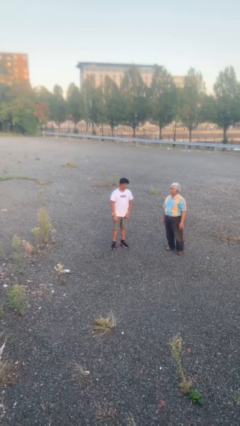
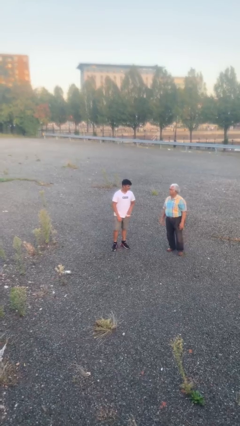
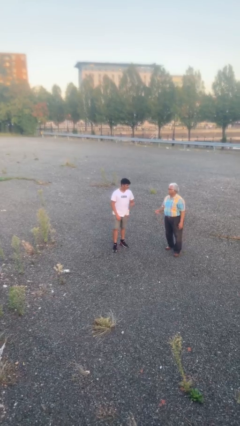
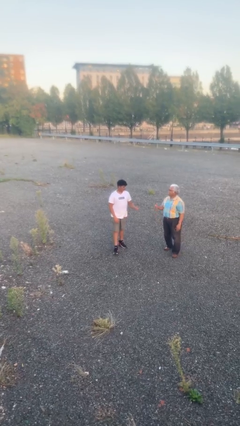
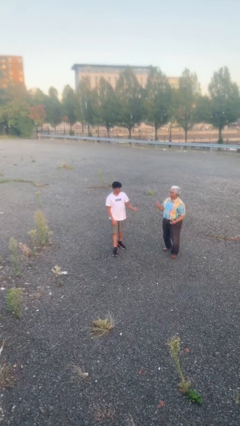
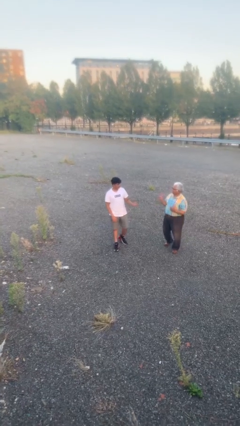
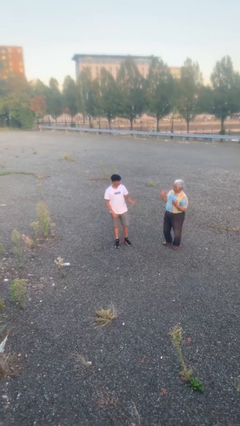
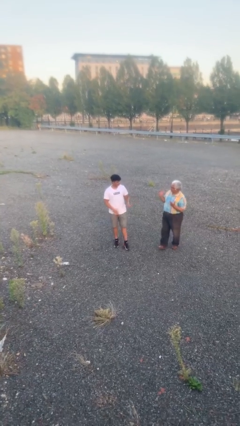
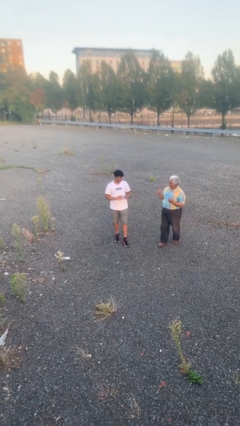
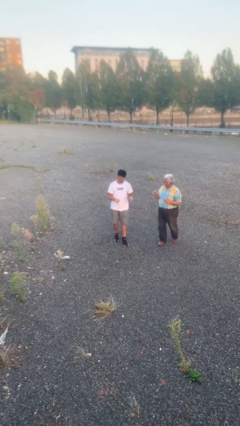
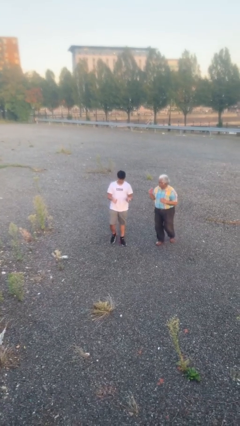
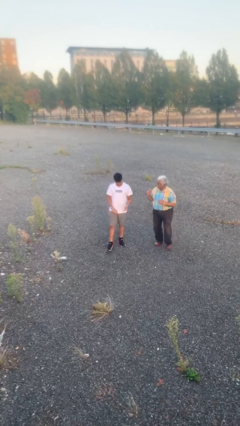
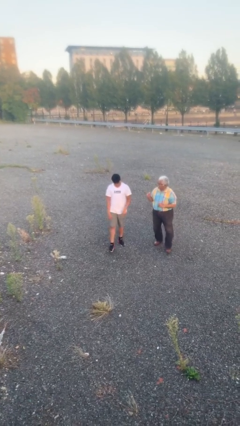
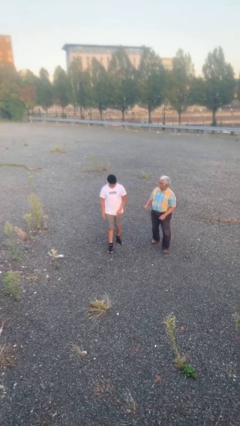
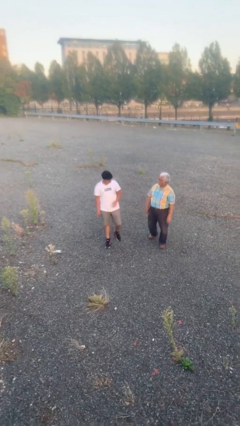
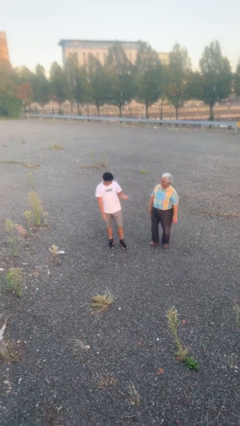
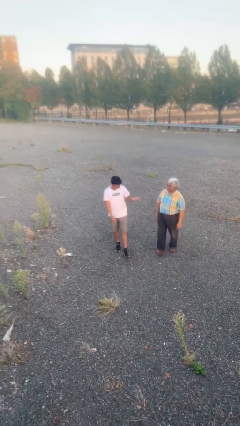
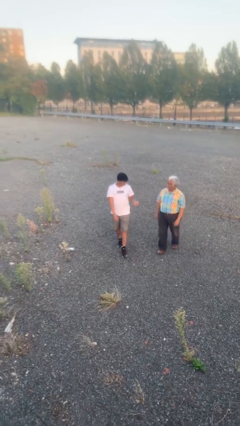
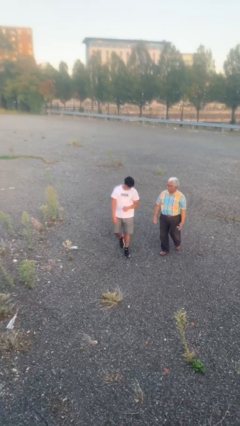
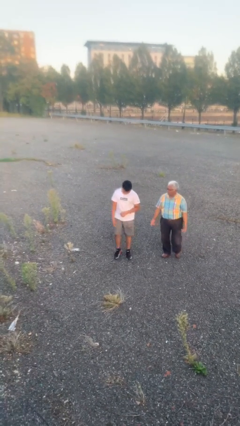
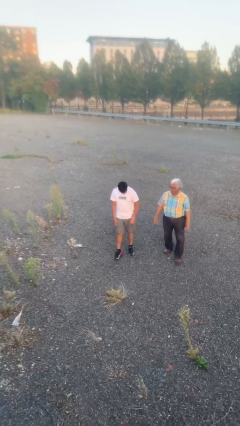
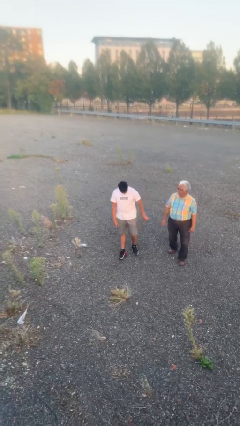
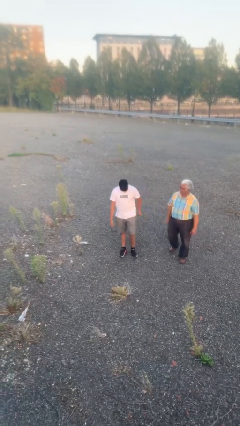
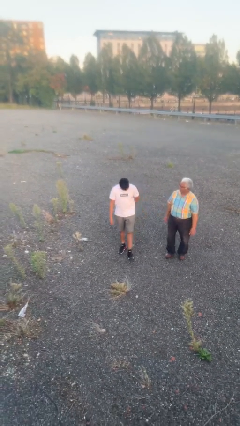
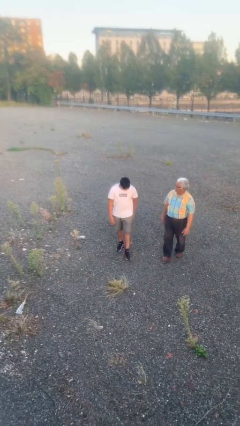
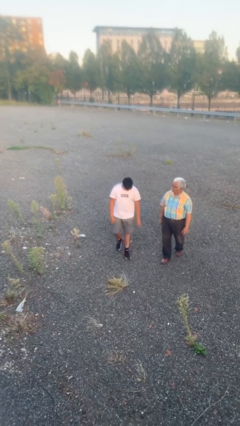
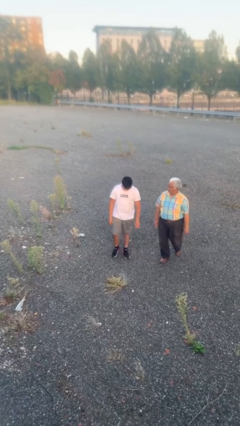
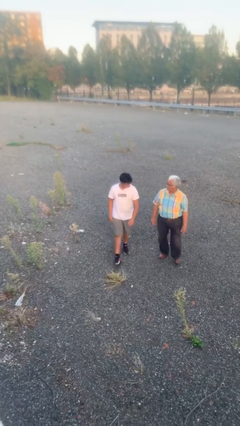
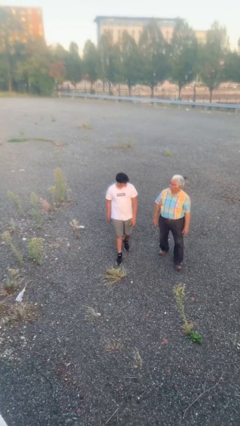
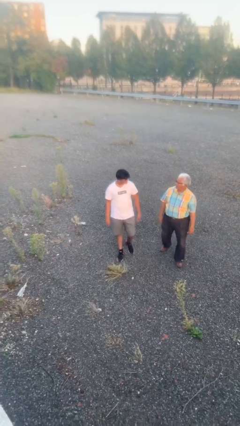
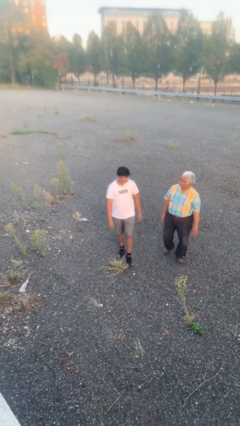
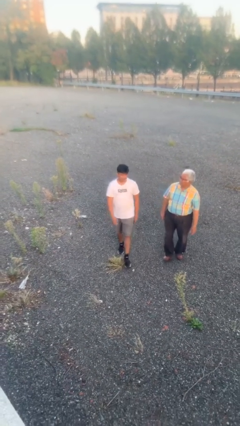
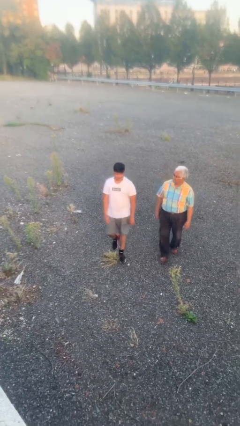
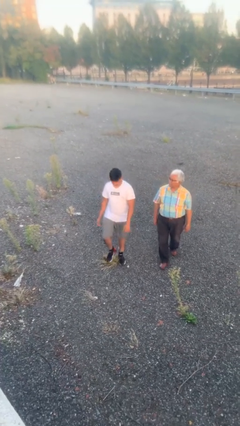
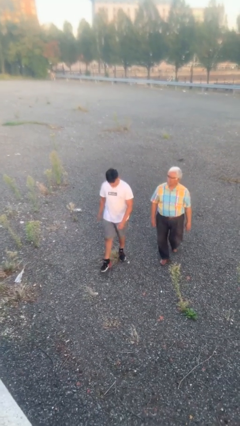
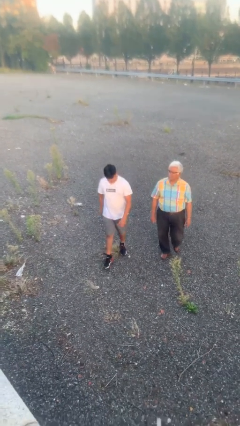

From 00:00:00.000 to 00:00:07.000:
person talks to person

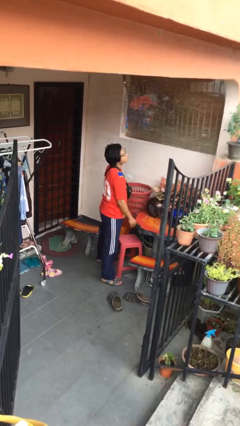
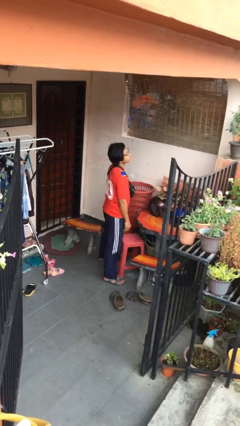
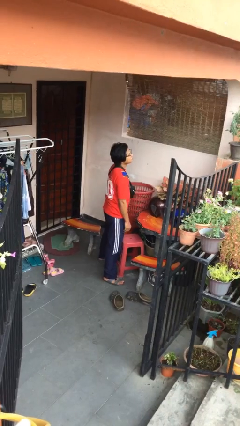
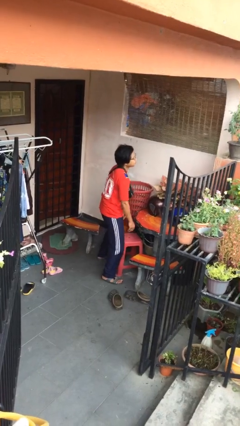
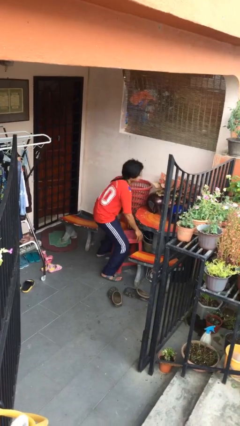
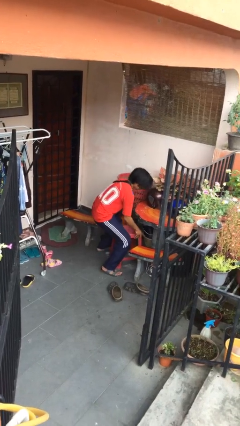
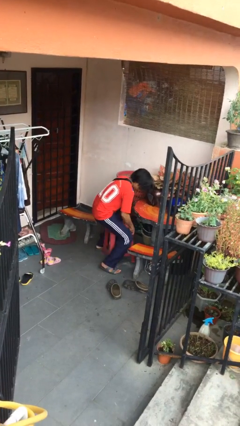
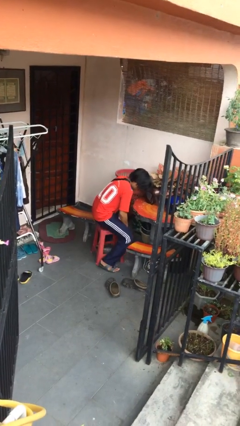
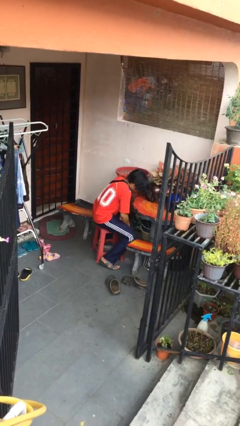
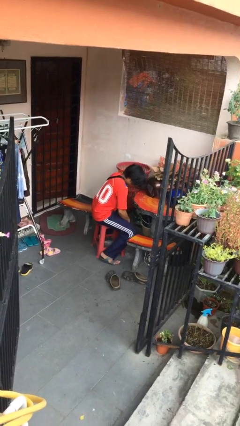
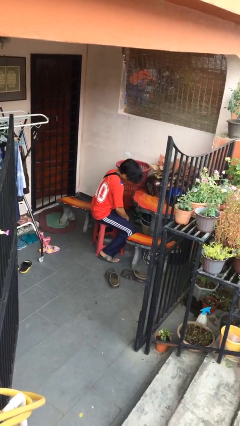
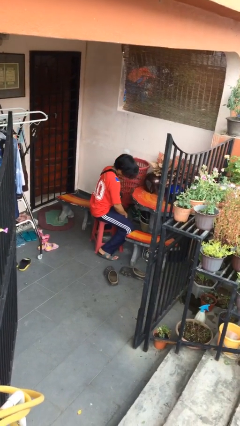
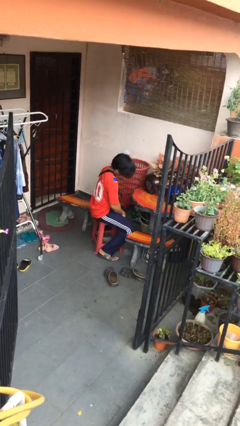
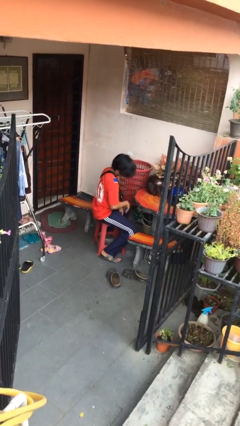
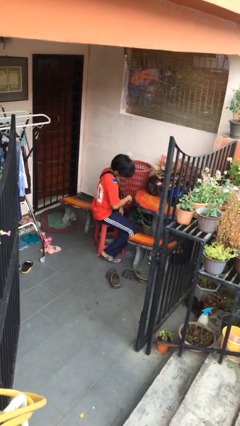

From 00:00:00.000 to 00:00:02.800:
person sits down

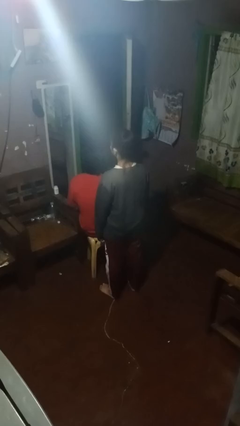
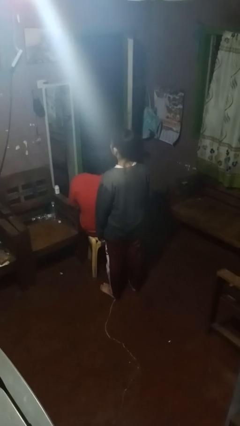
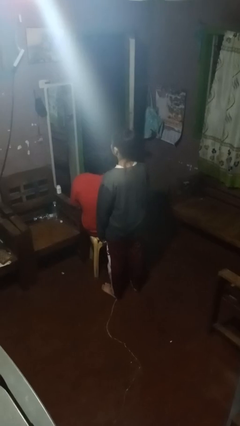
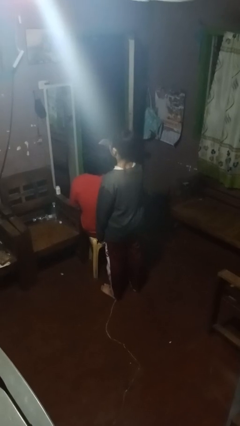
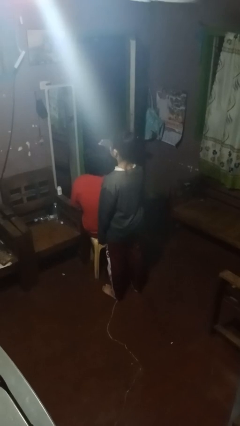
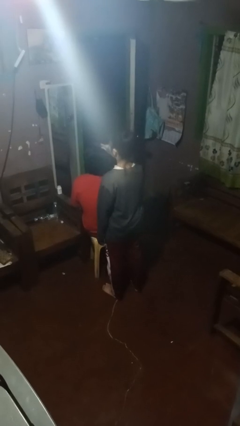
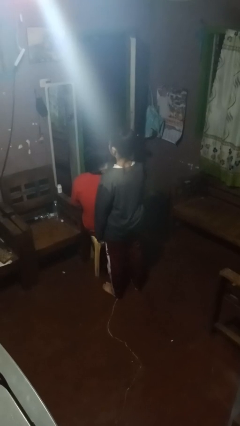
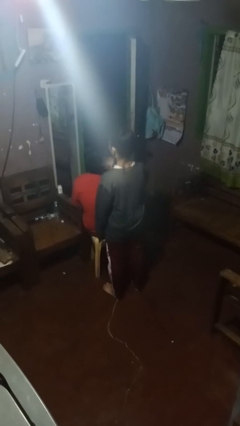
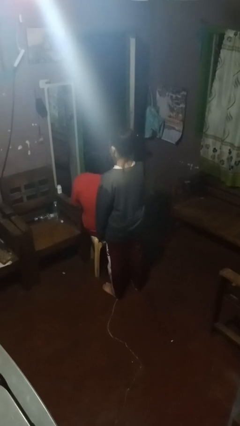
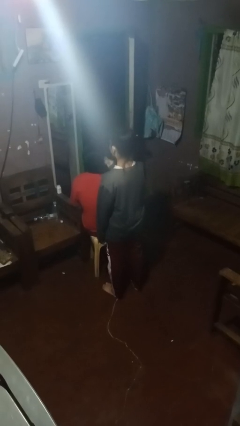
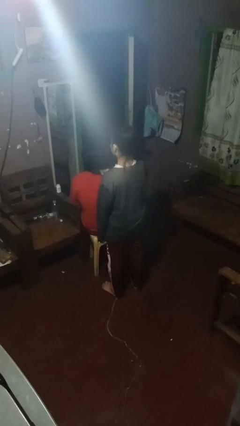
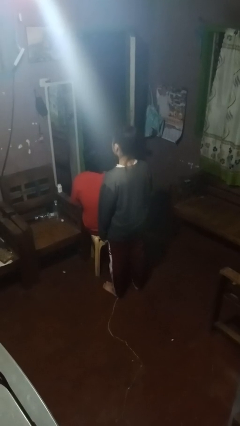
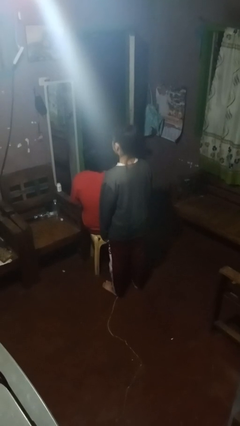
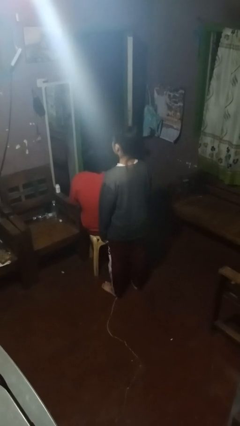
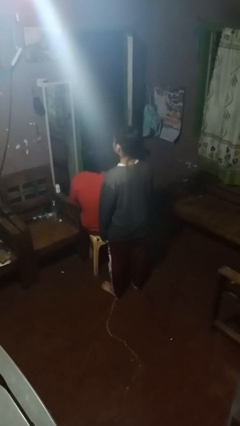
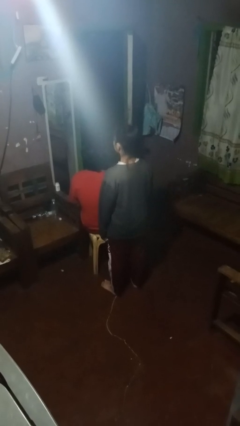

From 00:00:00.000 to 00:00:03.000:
person brushes hair of person

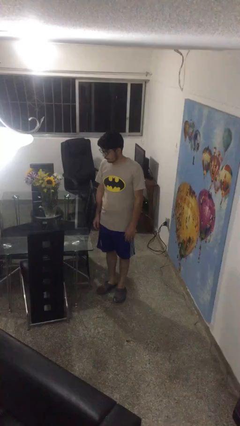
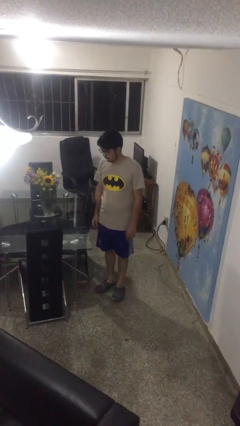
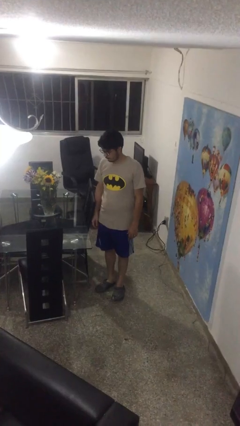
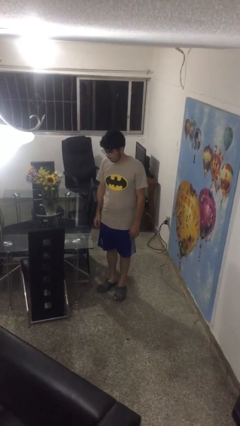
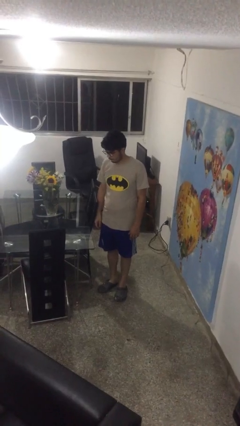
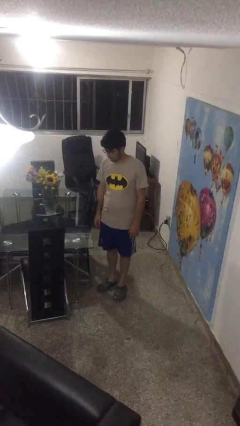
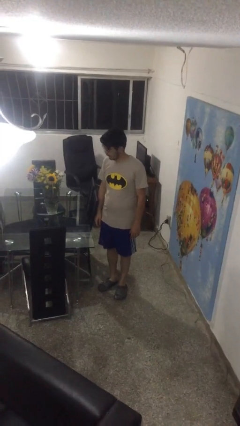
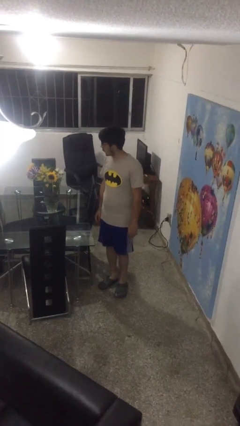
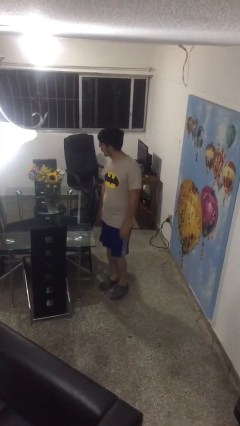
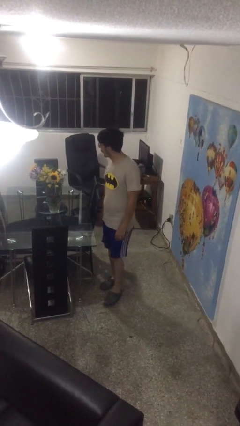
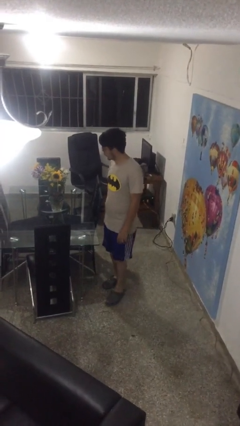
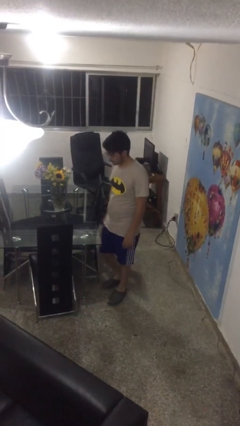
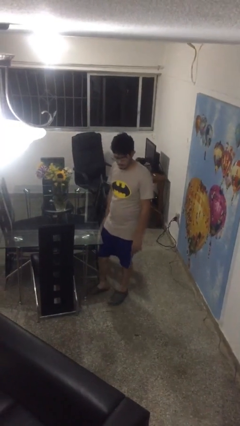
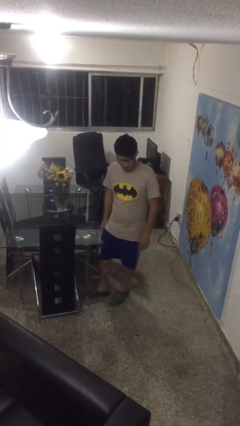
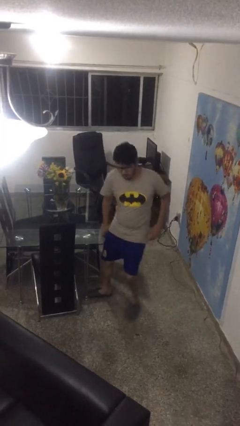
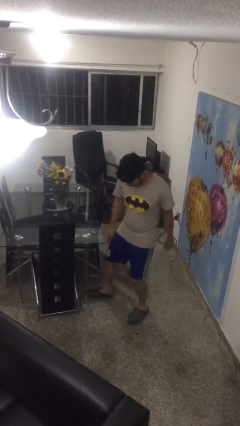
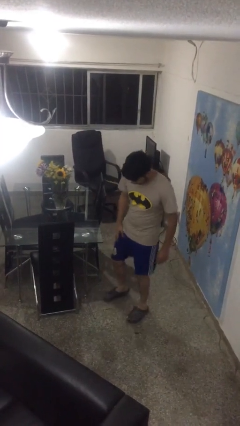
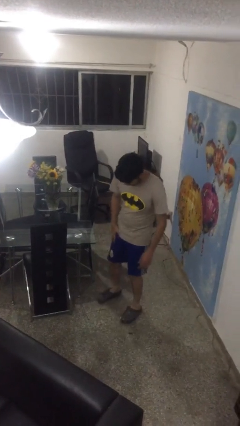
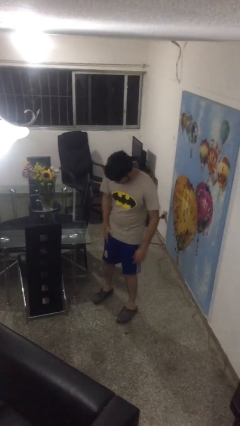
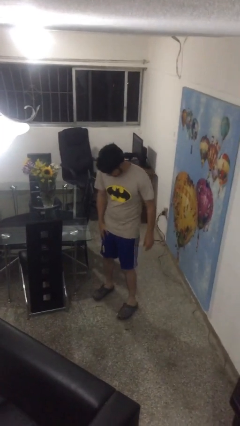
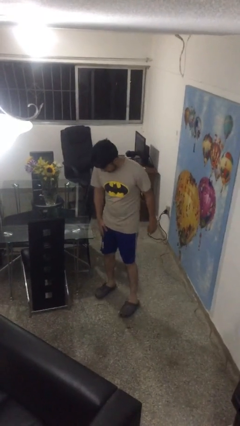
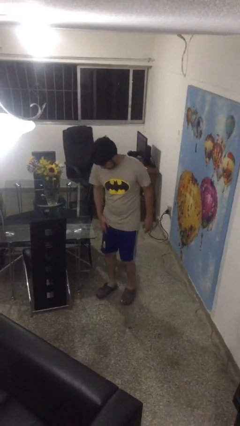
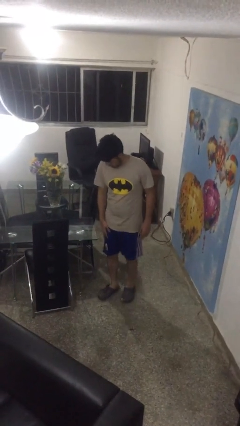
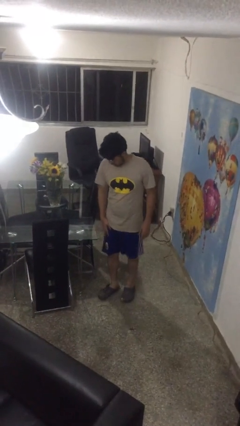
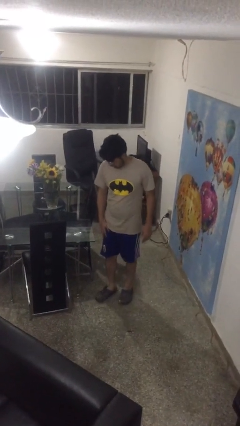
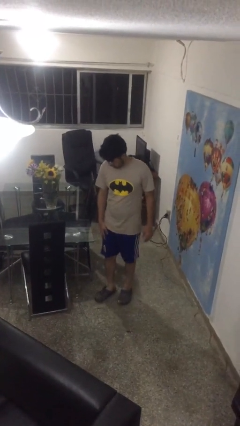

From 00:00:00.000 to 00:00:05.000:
person bumps into table
